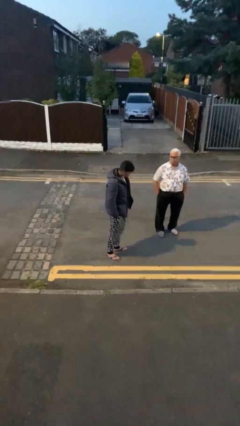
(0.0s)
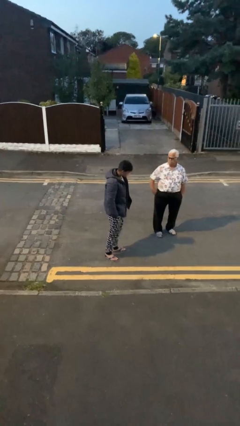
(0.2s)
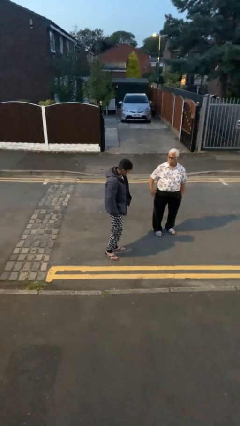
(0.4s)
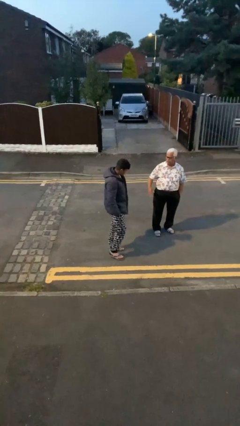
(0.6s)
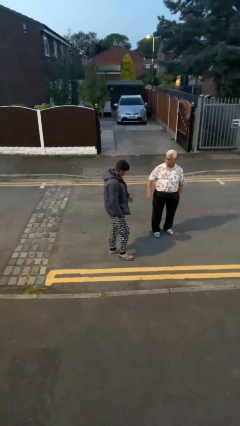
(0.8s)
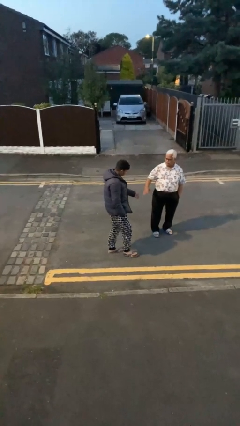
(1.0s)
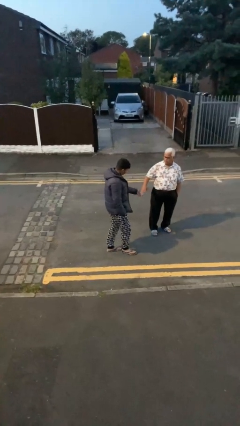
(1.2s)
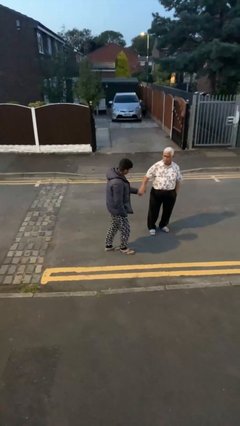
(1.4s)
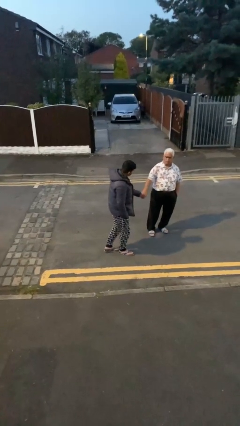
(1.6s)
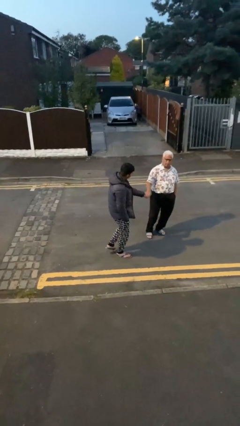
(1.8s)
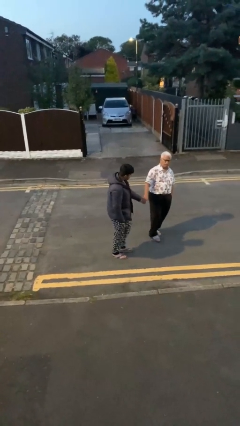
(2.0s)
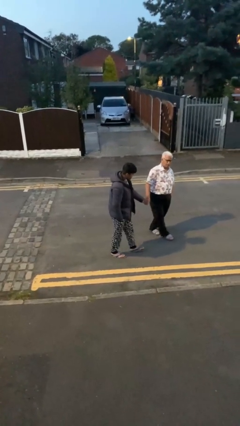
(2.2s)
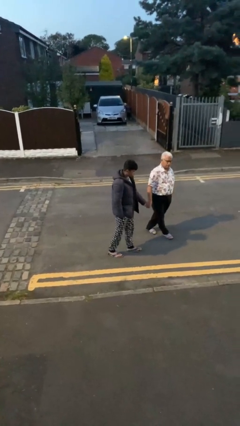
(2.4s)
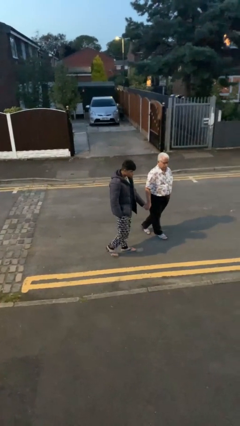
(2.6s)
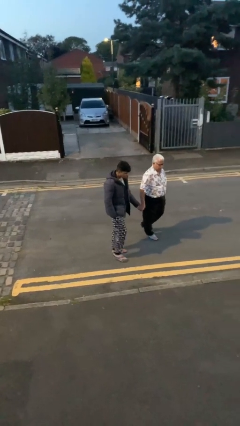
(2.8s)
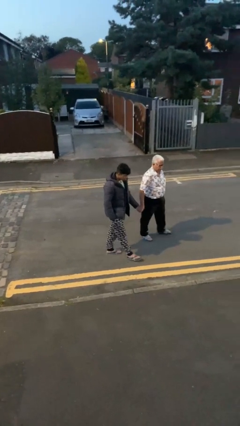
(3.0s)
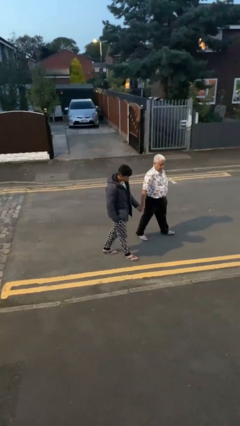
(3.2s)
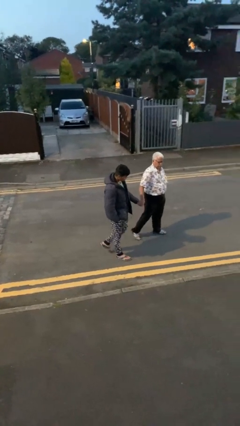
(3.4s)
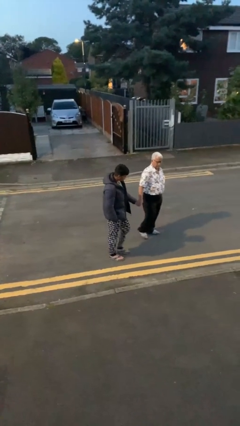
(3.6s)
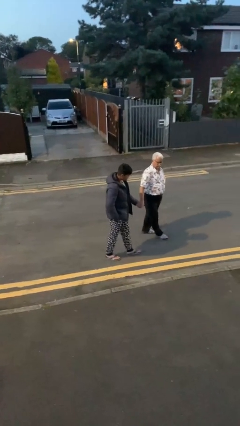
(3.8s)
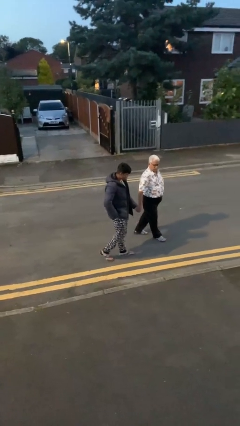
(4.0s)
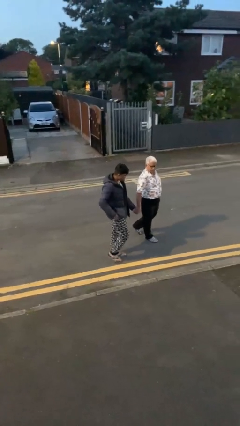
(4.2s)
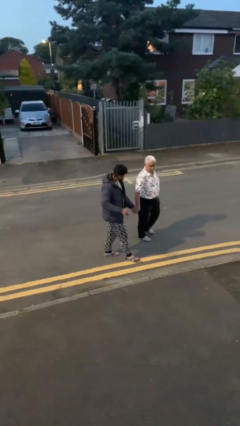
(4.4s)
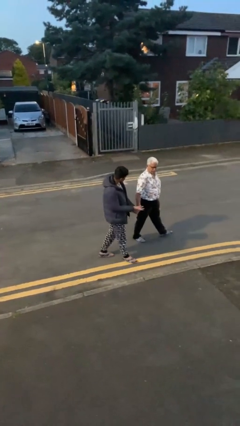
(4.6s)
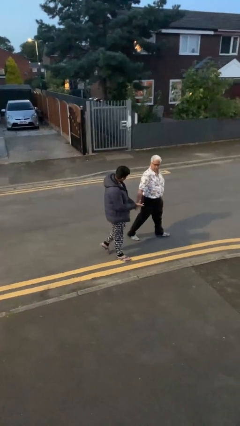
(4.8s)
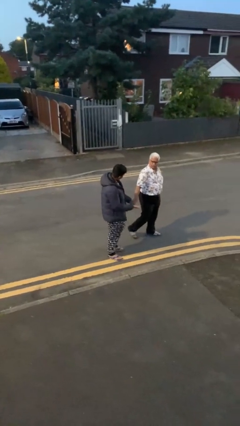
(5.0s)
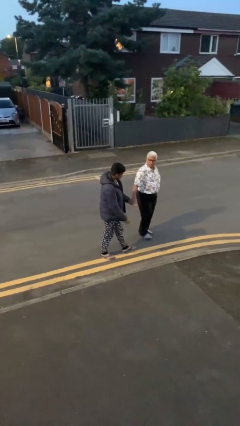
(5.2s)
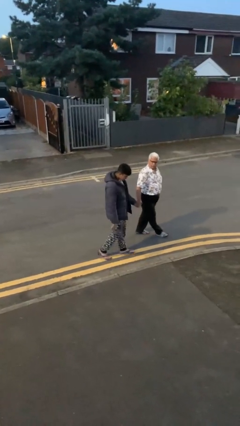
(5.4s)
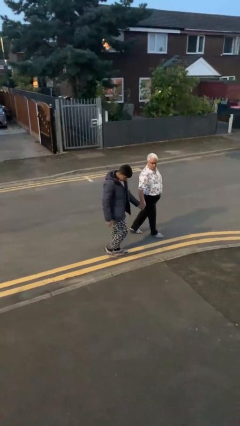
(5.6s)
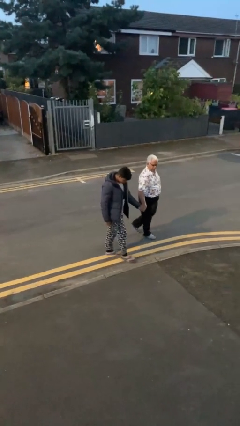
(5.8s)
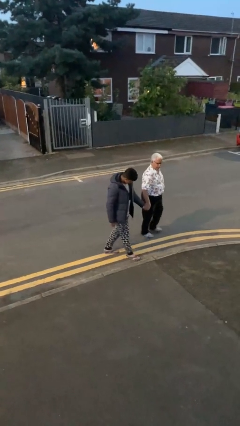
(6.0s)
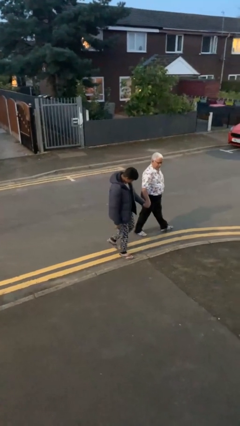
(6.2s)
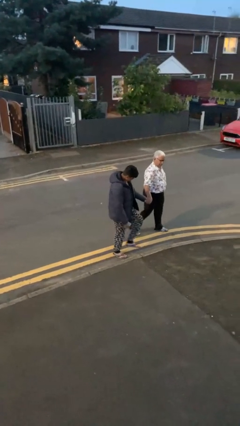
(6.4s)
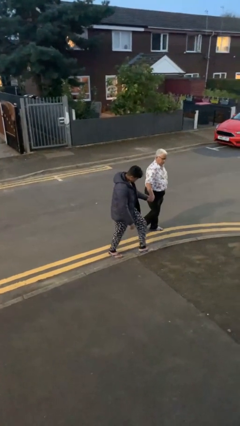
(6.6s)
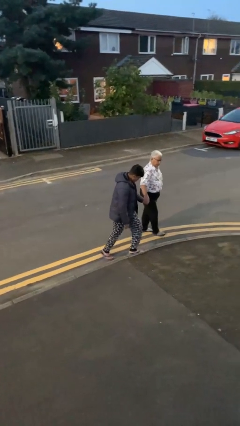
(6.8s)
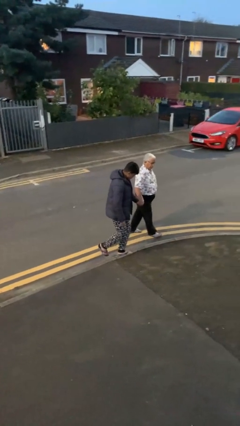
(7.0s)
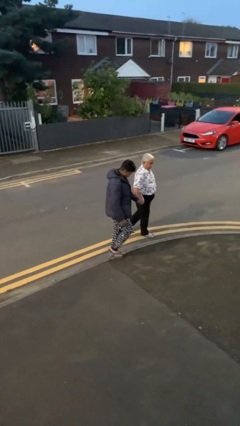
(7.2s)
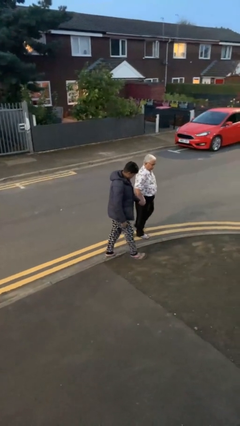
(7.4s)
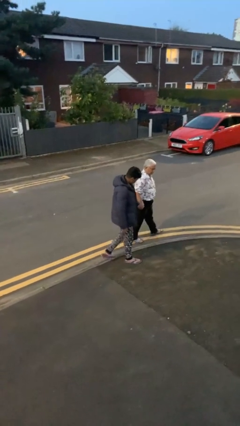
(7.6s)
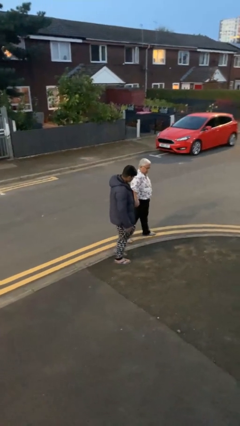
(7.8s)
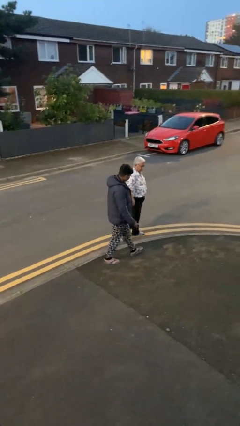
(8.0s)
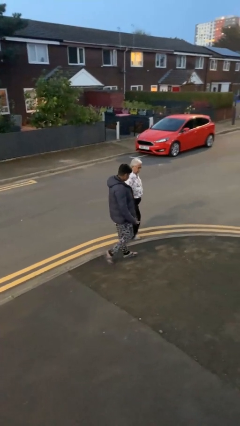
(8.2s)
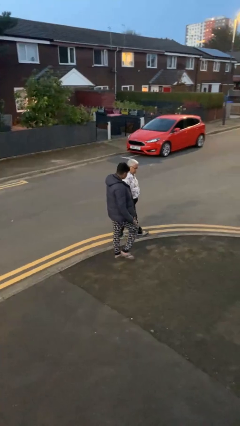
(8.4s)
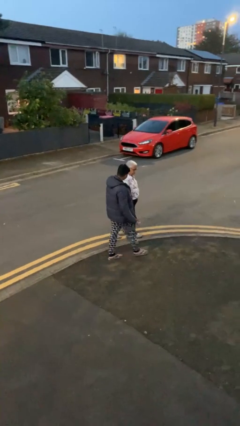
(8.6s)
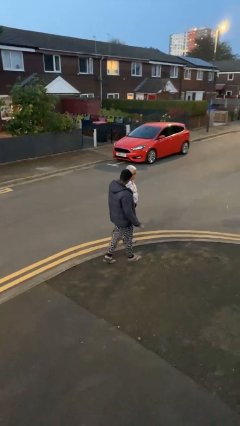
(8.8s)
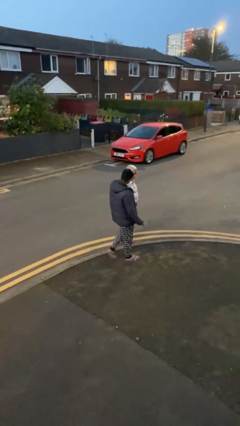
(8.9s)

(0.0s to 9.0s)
person holds hand

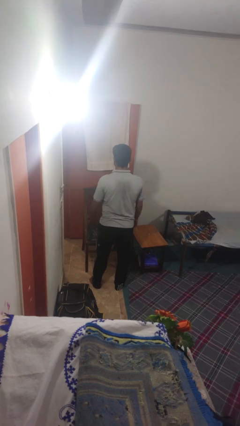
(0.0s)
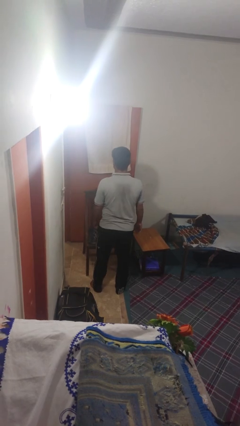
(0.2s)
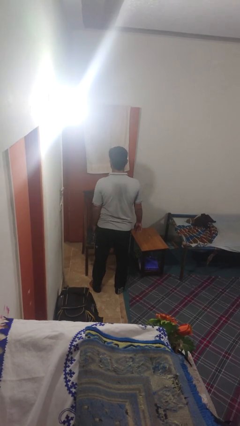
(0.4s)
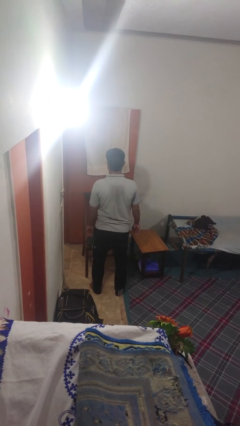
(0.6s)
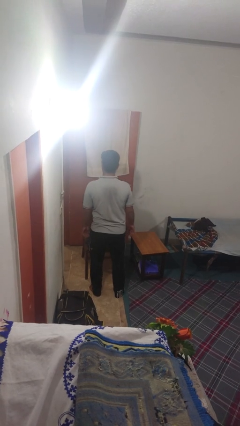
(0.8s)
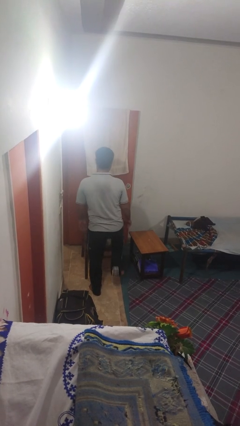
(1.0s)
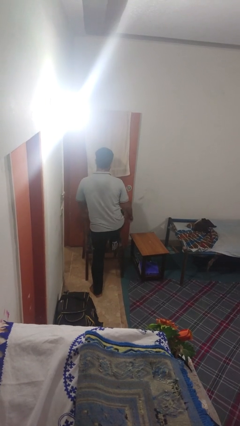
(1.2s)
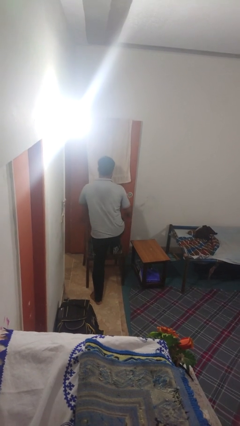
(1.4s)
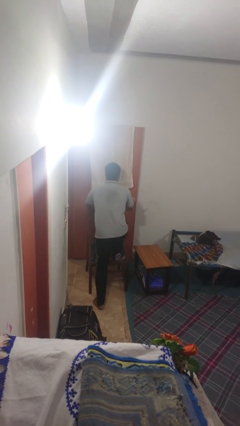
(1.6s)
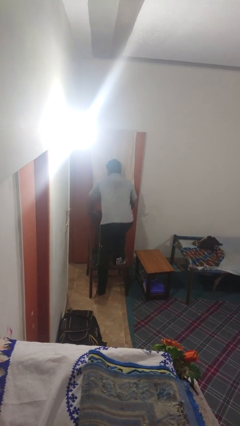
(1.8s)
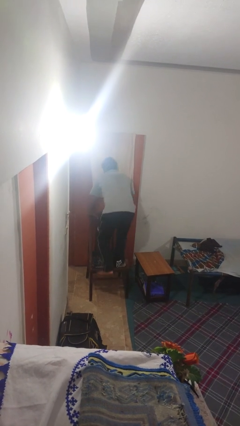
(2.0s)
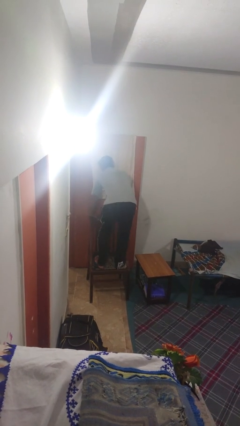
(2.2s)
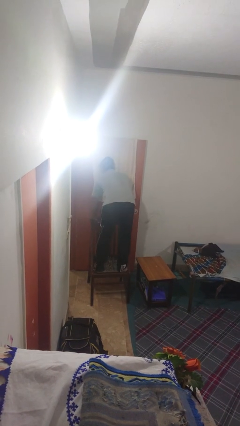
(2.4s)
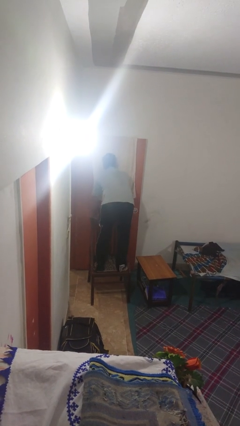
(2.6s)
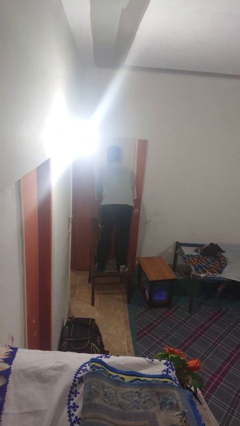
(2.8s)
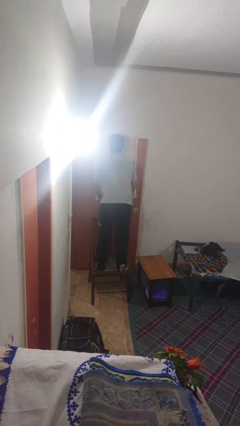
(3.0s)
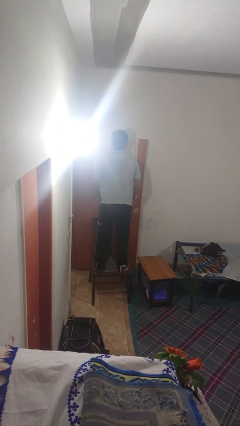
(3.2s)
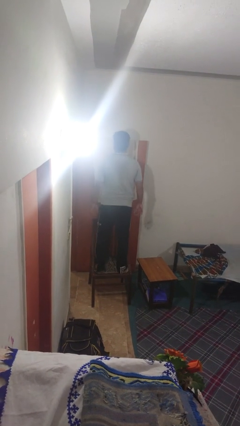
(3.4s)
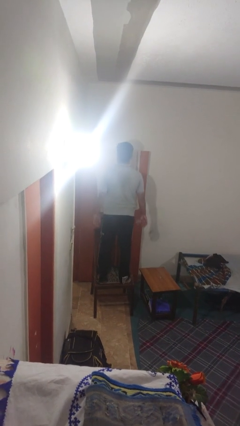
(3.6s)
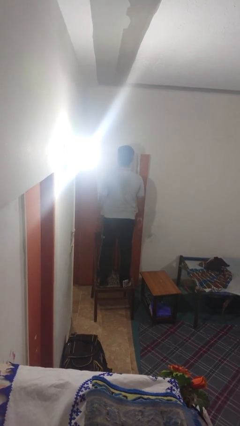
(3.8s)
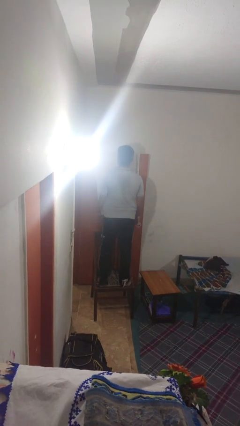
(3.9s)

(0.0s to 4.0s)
person climbs on chair

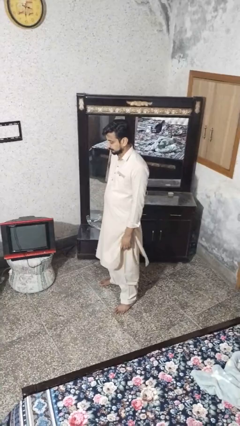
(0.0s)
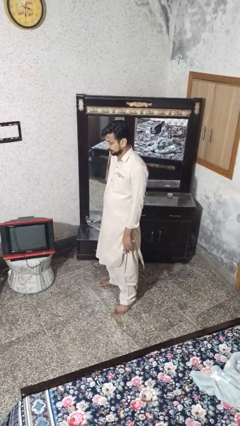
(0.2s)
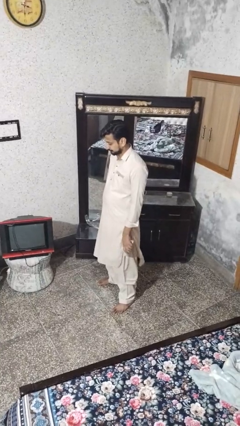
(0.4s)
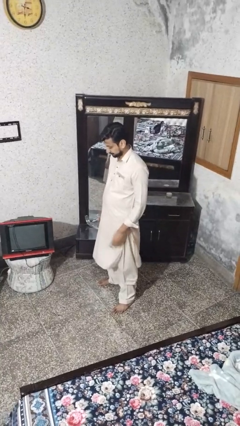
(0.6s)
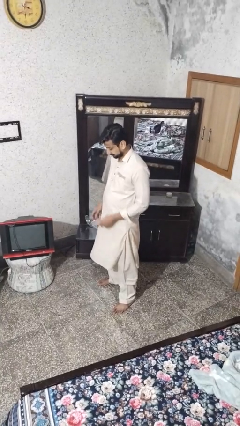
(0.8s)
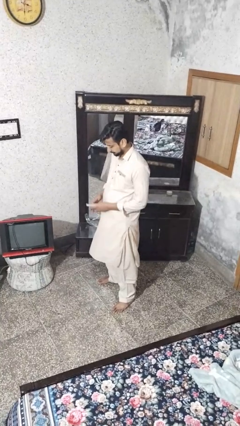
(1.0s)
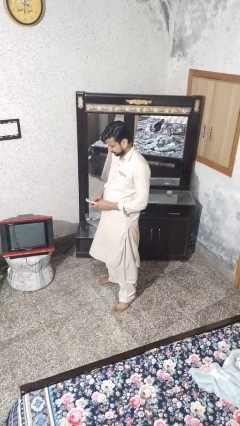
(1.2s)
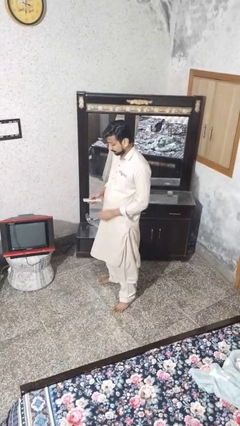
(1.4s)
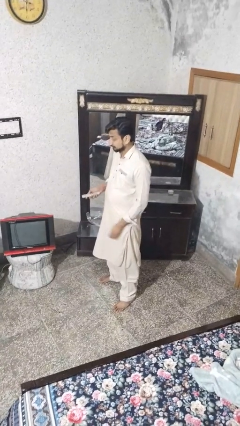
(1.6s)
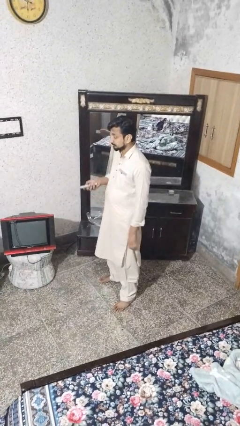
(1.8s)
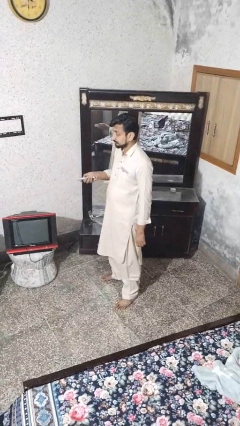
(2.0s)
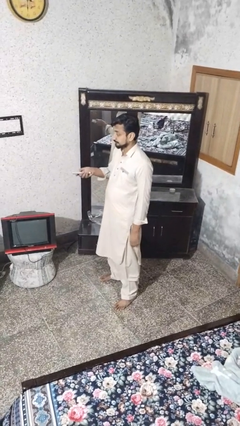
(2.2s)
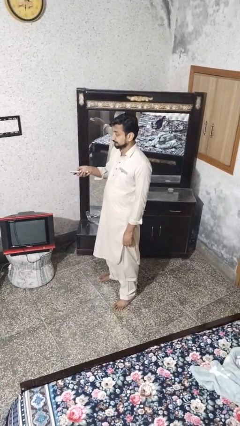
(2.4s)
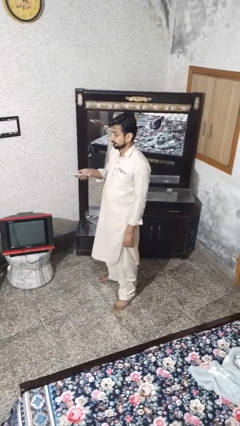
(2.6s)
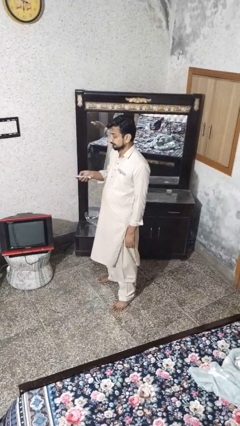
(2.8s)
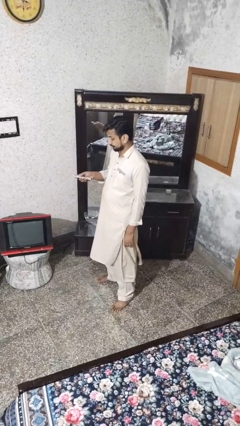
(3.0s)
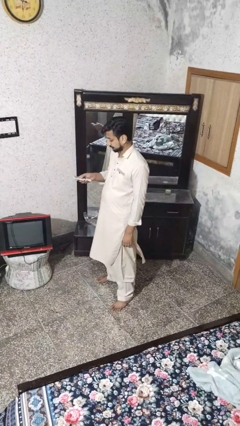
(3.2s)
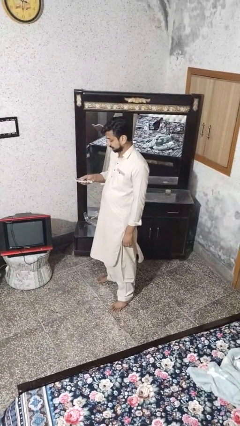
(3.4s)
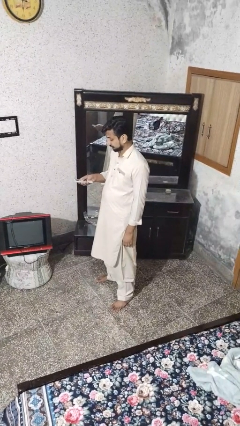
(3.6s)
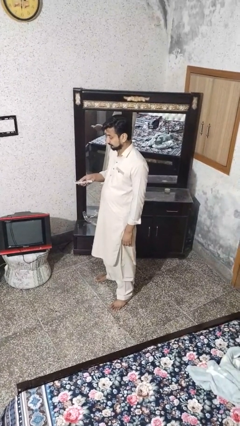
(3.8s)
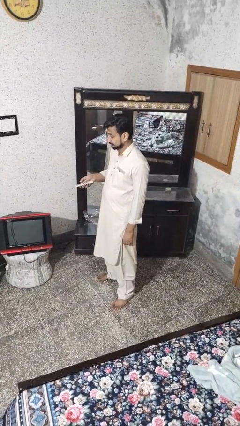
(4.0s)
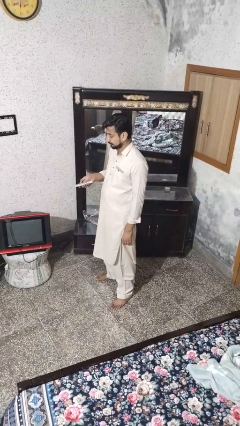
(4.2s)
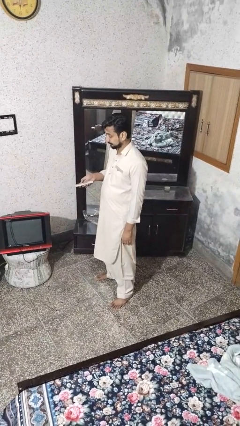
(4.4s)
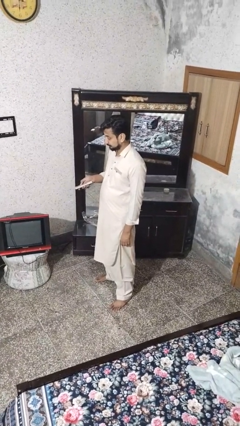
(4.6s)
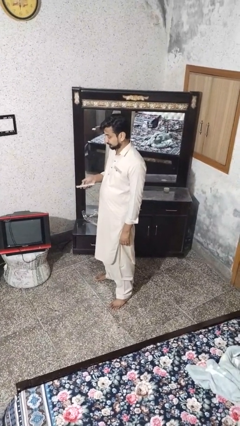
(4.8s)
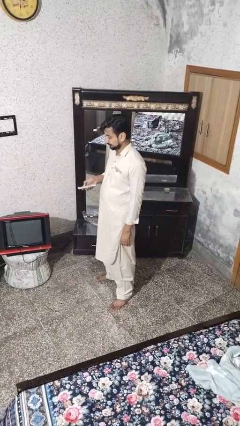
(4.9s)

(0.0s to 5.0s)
person uses television remote
